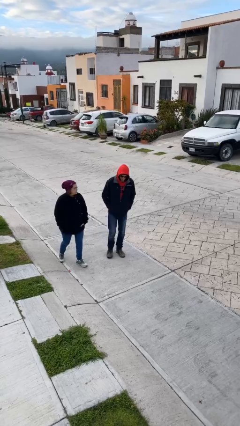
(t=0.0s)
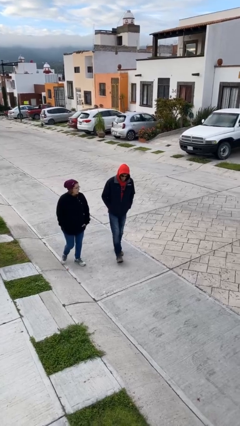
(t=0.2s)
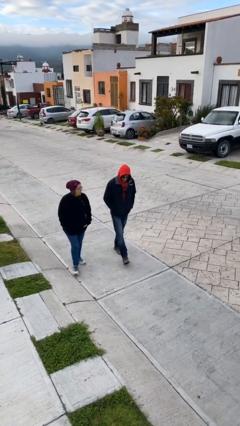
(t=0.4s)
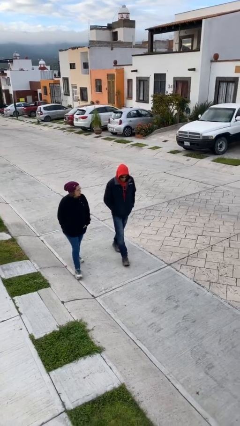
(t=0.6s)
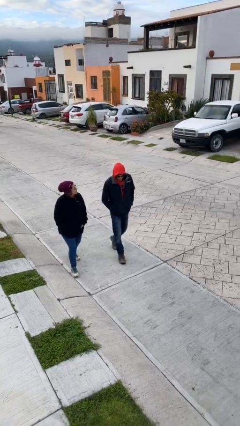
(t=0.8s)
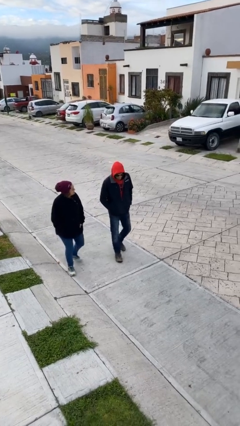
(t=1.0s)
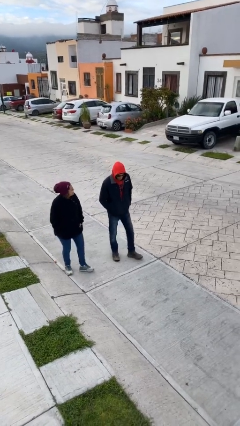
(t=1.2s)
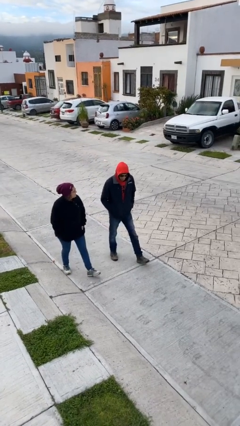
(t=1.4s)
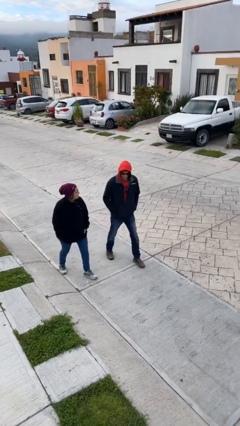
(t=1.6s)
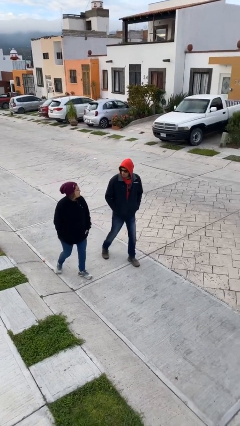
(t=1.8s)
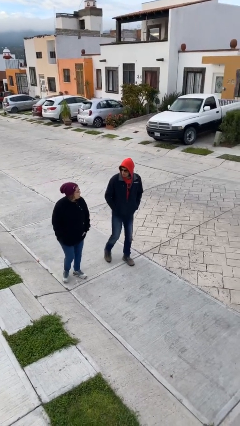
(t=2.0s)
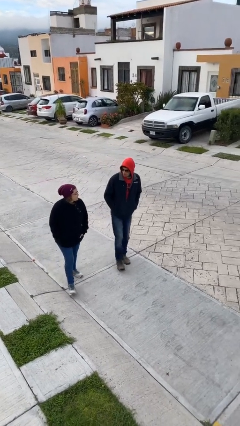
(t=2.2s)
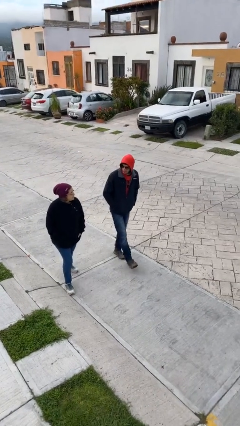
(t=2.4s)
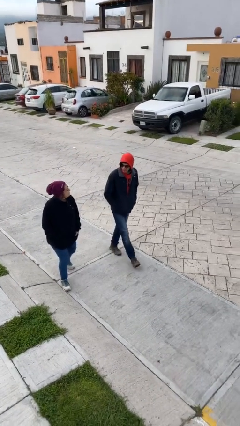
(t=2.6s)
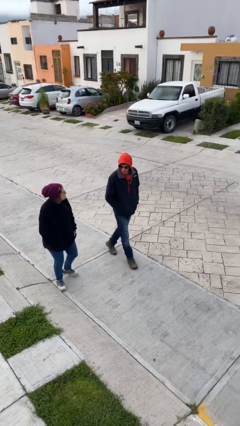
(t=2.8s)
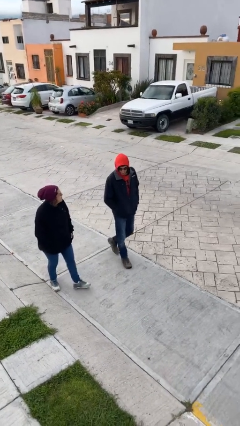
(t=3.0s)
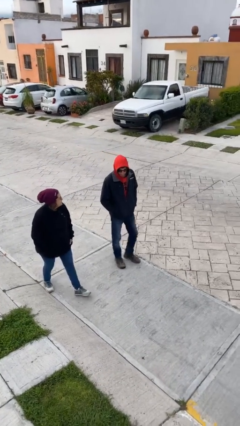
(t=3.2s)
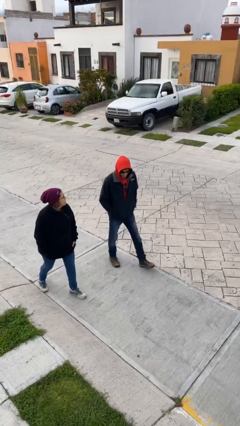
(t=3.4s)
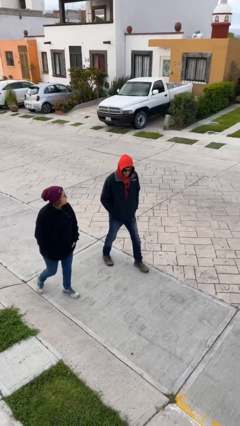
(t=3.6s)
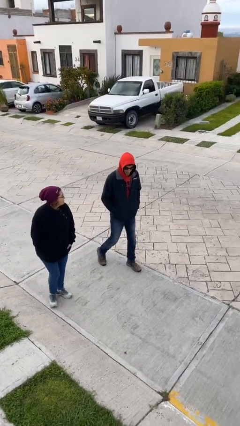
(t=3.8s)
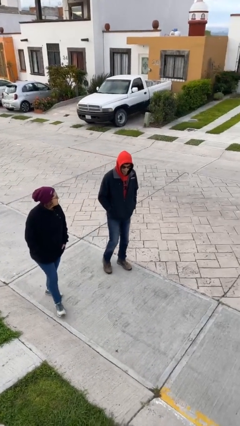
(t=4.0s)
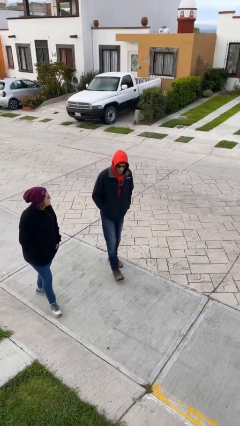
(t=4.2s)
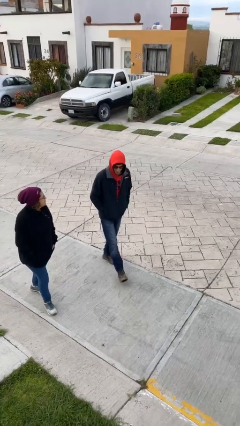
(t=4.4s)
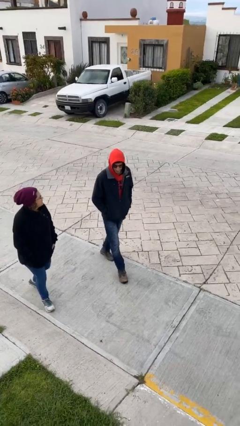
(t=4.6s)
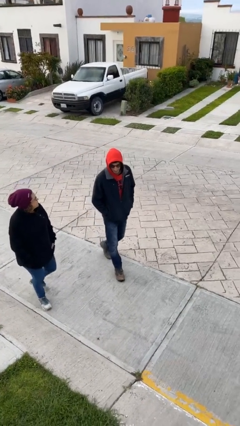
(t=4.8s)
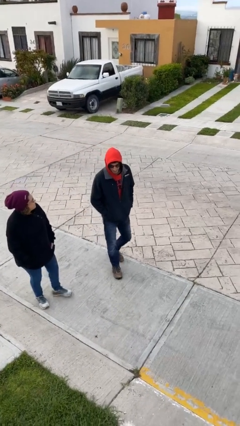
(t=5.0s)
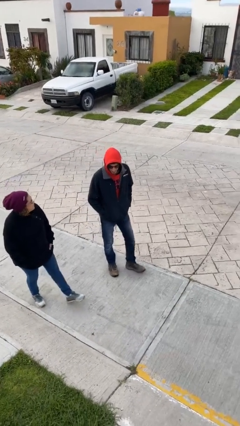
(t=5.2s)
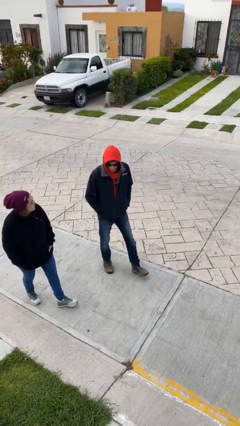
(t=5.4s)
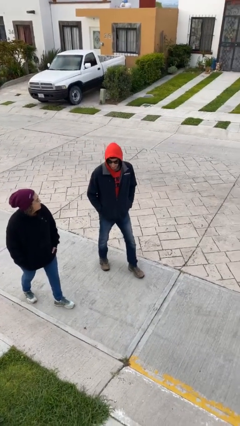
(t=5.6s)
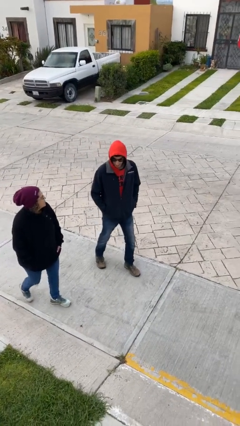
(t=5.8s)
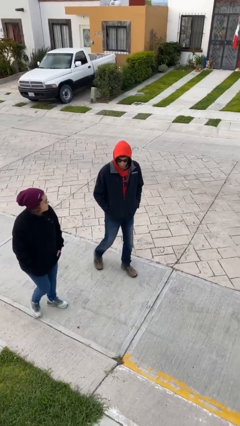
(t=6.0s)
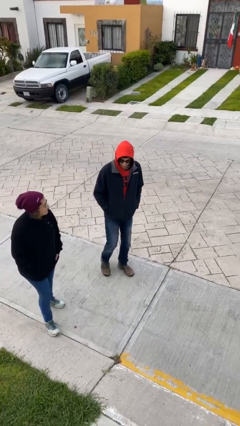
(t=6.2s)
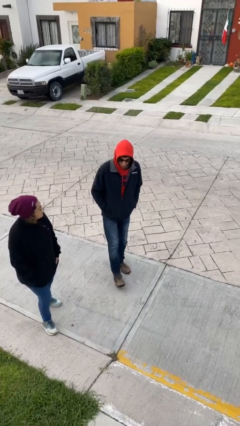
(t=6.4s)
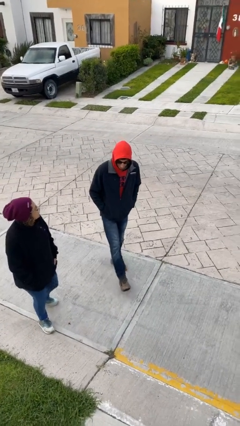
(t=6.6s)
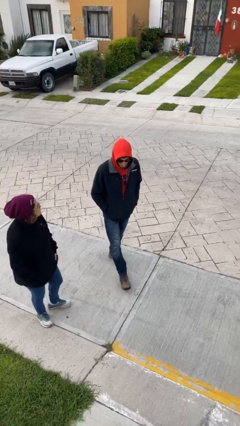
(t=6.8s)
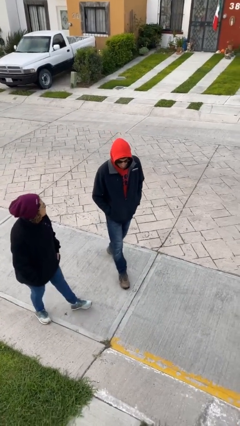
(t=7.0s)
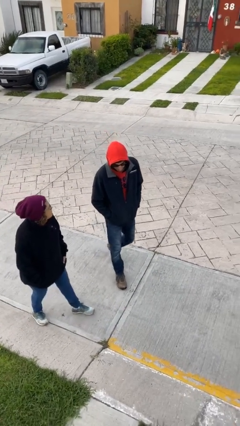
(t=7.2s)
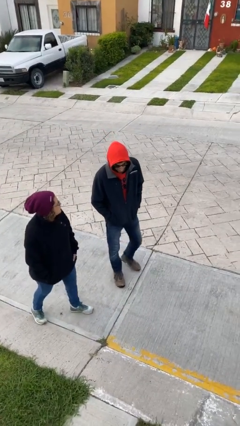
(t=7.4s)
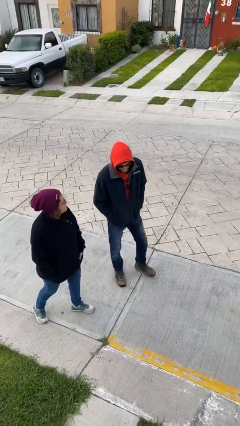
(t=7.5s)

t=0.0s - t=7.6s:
person talks to person

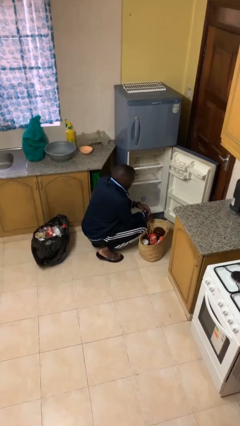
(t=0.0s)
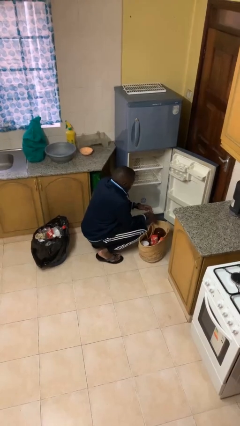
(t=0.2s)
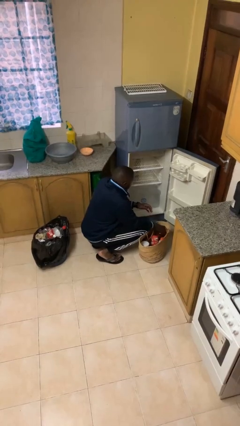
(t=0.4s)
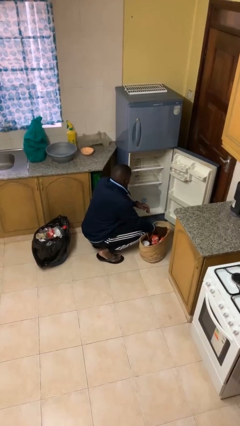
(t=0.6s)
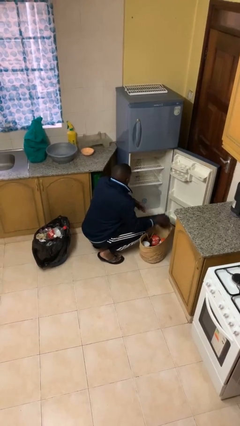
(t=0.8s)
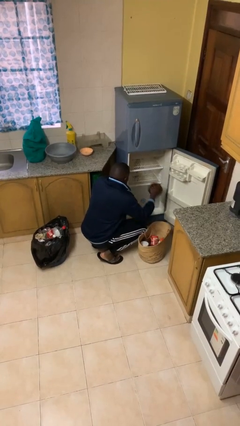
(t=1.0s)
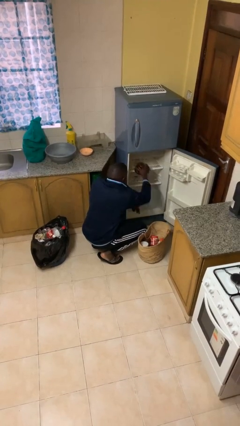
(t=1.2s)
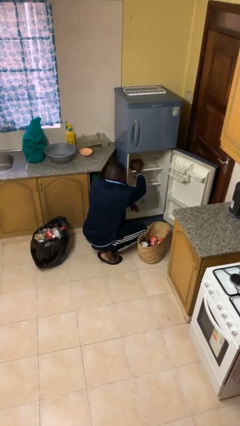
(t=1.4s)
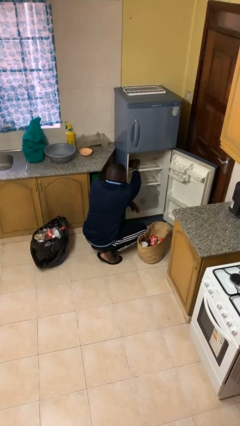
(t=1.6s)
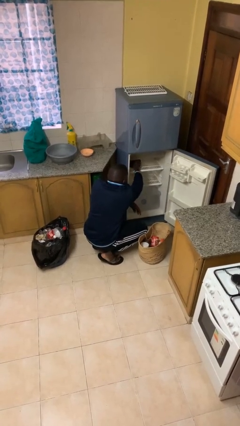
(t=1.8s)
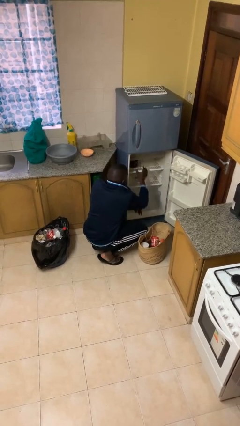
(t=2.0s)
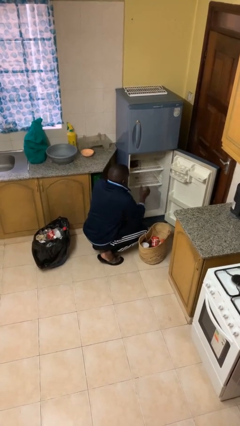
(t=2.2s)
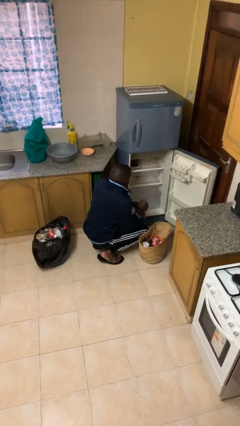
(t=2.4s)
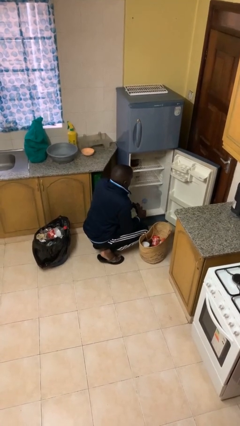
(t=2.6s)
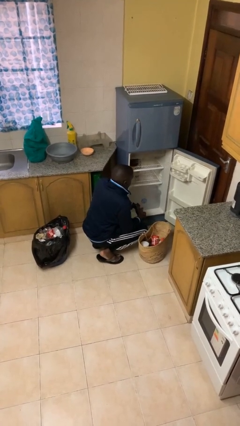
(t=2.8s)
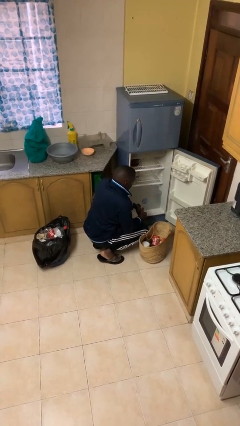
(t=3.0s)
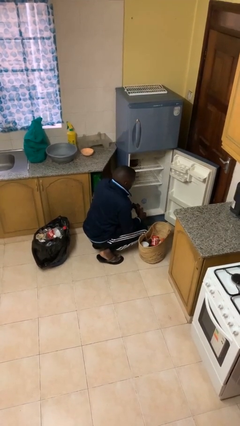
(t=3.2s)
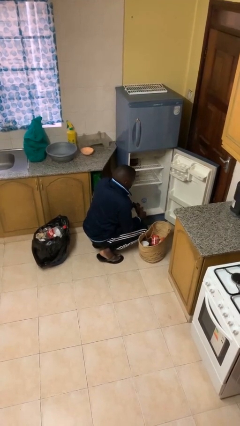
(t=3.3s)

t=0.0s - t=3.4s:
person loads groceries into refrigerator

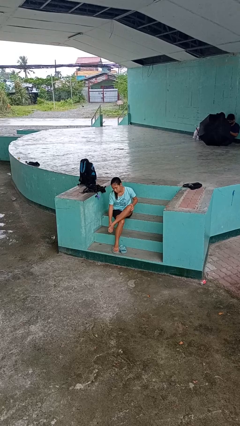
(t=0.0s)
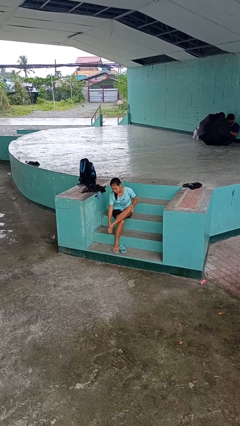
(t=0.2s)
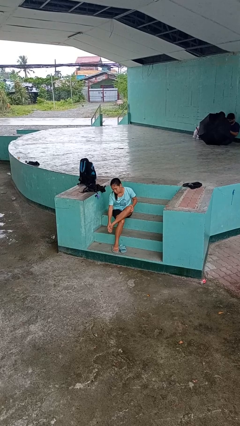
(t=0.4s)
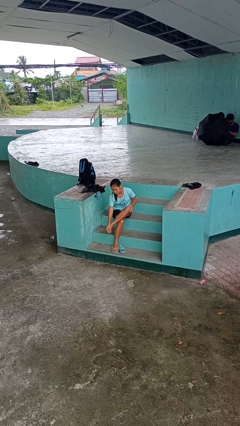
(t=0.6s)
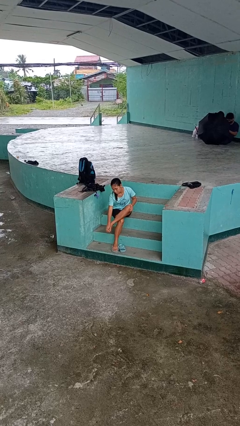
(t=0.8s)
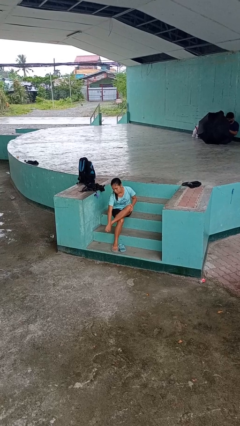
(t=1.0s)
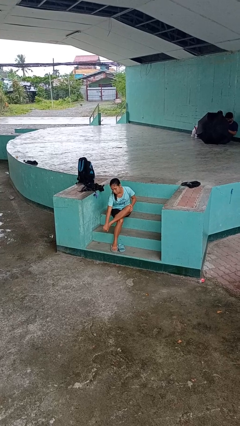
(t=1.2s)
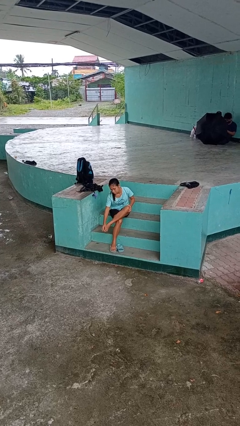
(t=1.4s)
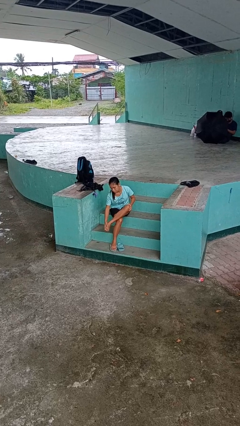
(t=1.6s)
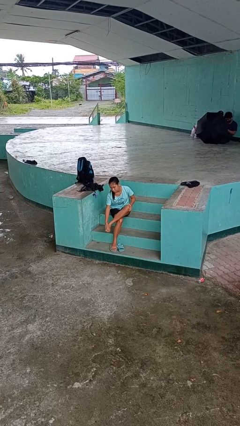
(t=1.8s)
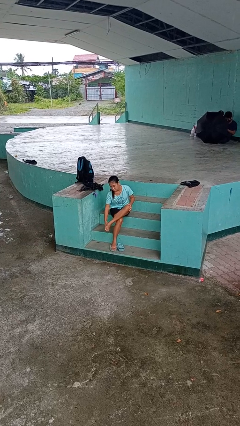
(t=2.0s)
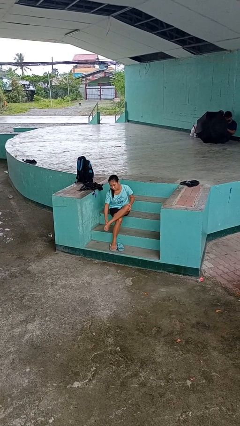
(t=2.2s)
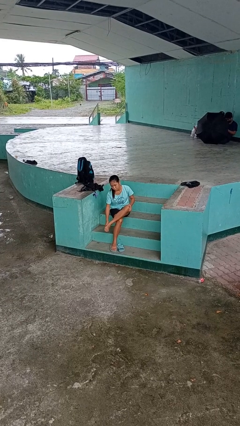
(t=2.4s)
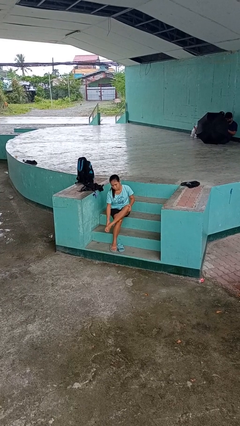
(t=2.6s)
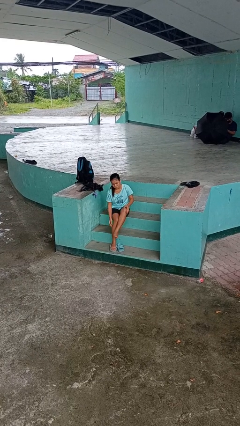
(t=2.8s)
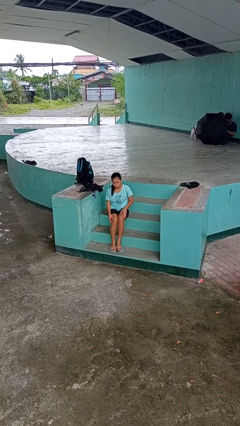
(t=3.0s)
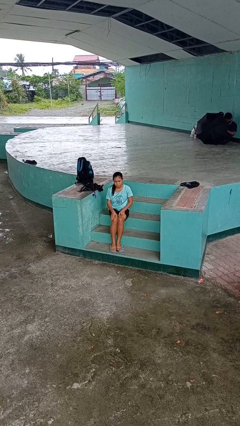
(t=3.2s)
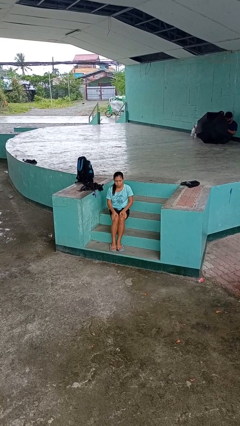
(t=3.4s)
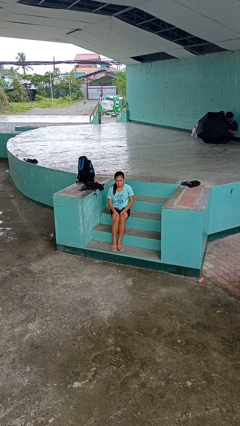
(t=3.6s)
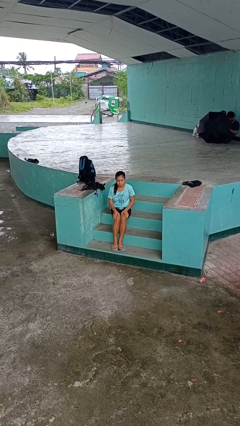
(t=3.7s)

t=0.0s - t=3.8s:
person rubs foot

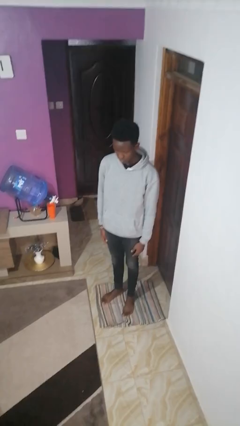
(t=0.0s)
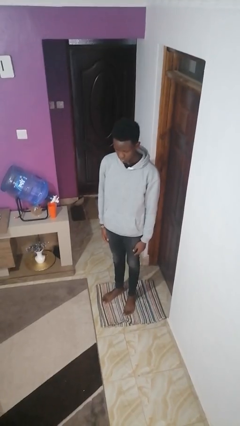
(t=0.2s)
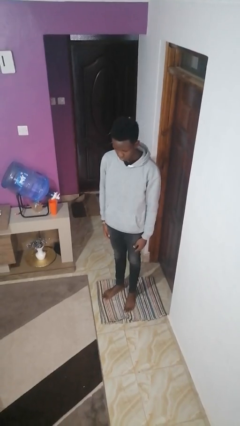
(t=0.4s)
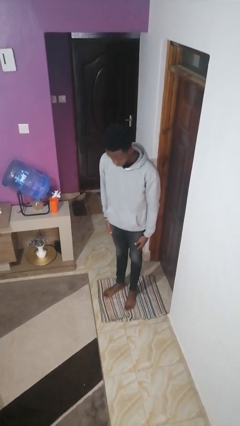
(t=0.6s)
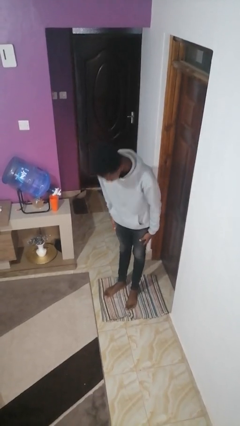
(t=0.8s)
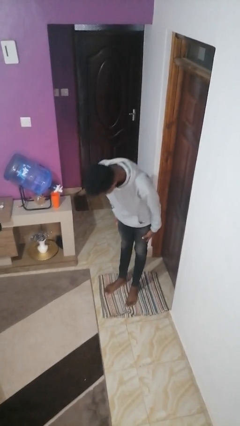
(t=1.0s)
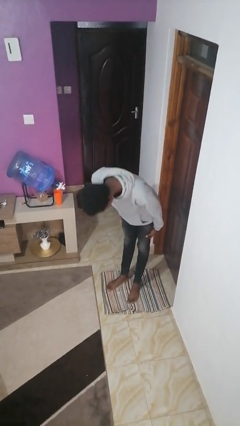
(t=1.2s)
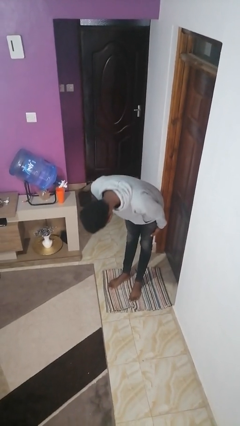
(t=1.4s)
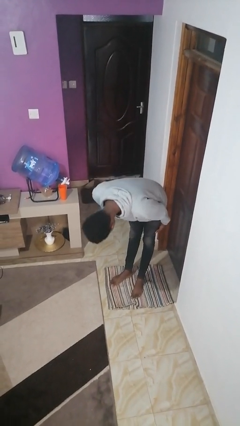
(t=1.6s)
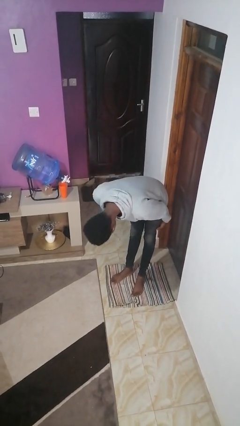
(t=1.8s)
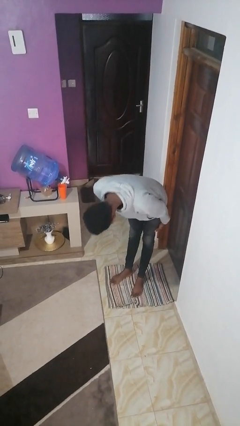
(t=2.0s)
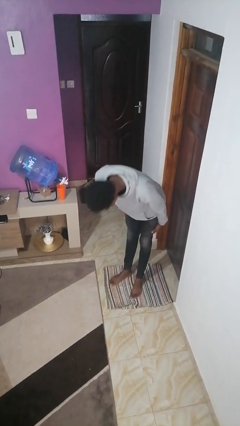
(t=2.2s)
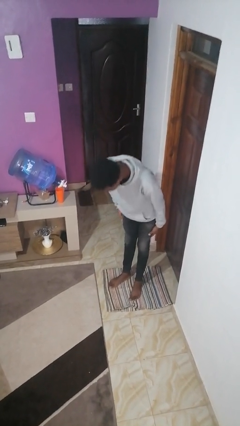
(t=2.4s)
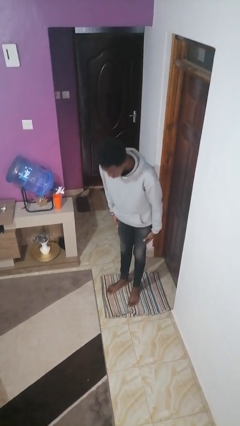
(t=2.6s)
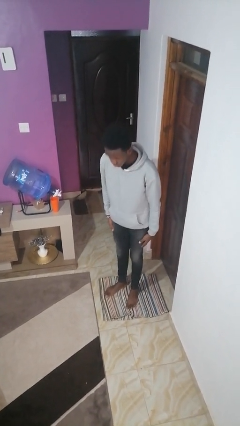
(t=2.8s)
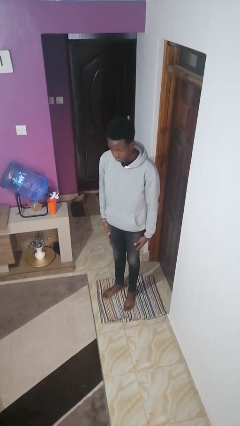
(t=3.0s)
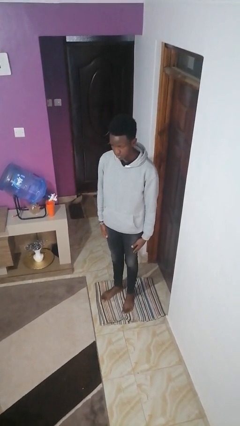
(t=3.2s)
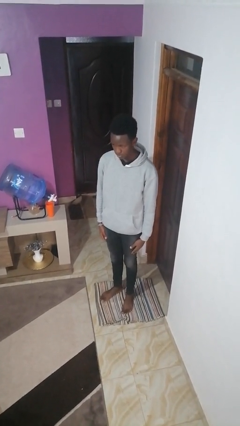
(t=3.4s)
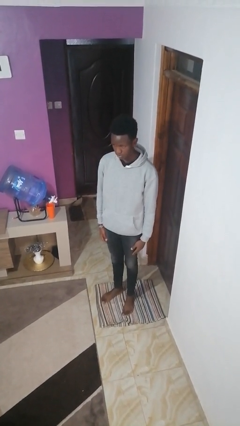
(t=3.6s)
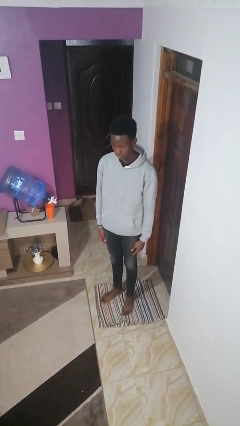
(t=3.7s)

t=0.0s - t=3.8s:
person bows
